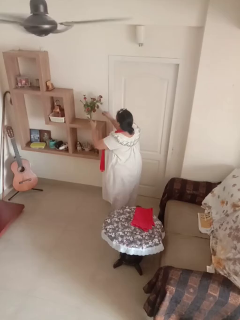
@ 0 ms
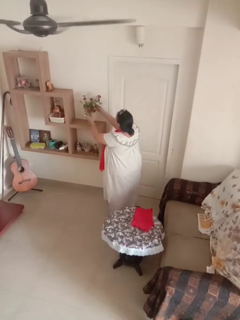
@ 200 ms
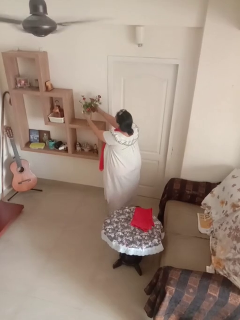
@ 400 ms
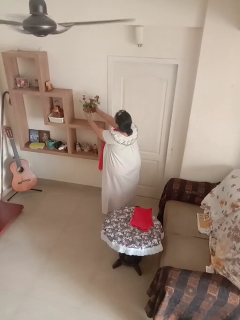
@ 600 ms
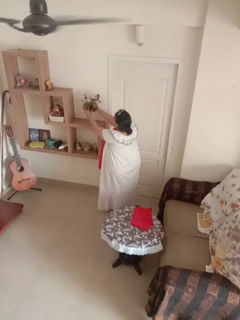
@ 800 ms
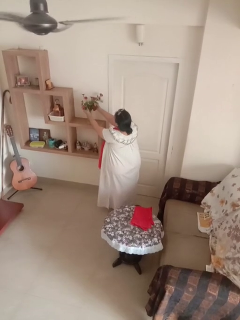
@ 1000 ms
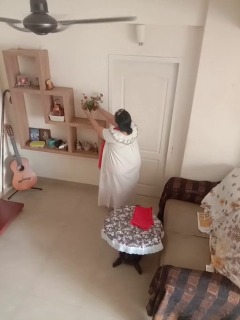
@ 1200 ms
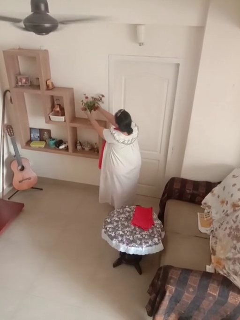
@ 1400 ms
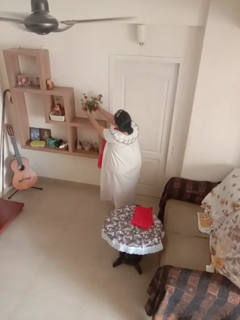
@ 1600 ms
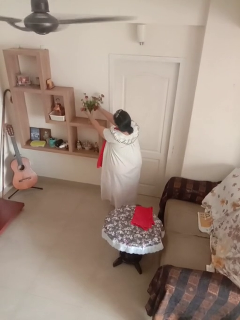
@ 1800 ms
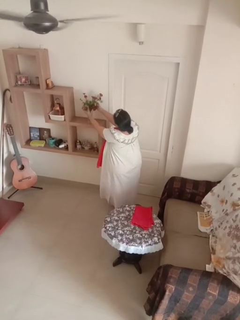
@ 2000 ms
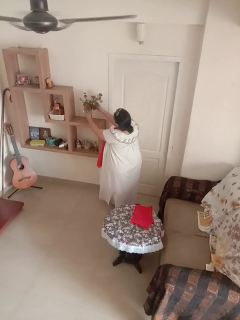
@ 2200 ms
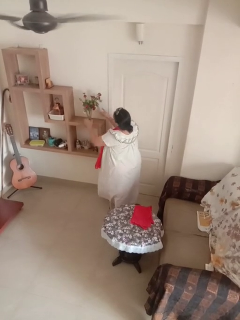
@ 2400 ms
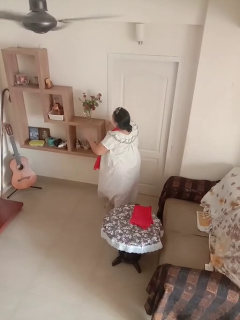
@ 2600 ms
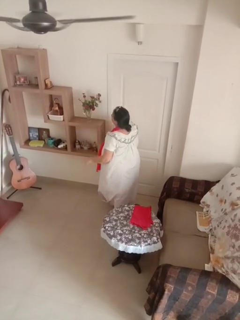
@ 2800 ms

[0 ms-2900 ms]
person arranges flowers in vase

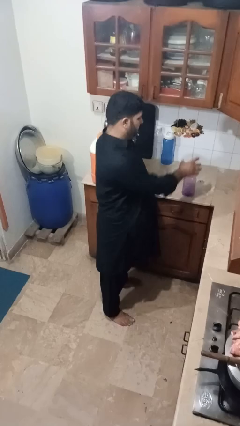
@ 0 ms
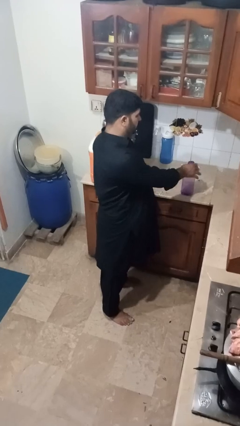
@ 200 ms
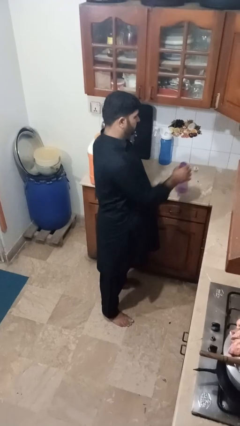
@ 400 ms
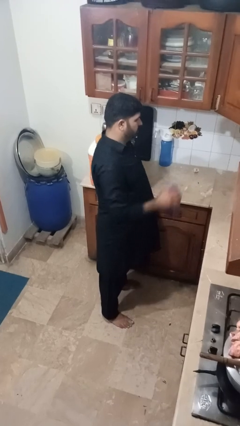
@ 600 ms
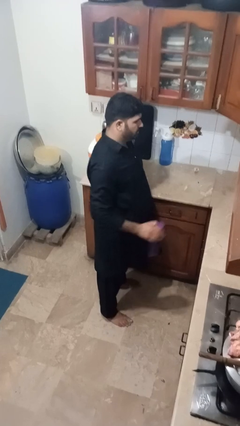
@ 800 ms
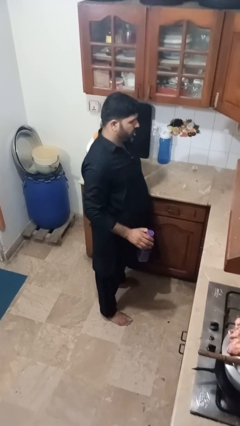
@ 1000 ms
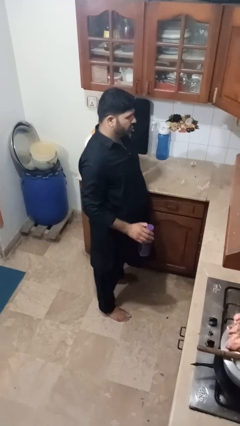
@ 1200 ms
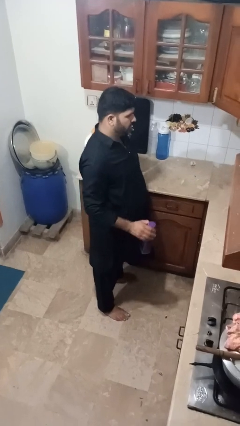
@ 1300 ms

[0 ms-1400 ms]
person picks up object from countertop

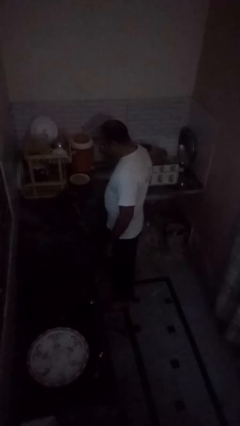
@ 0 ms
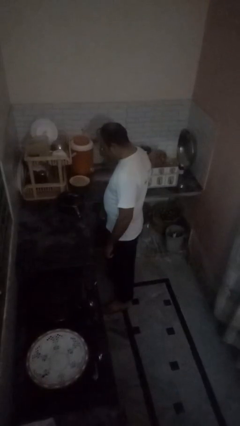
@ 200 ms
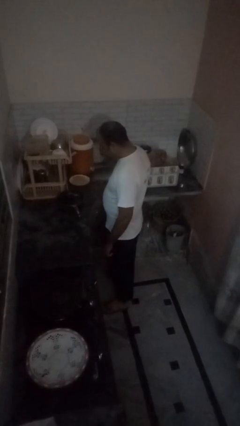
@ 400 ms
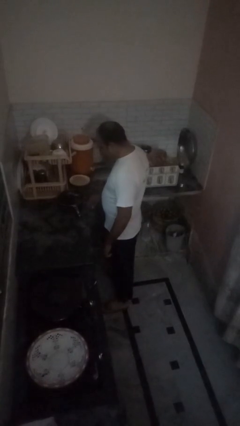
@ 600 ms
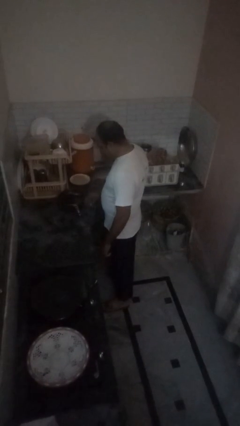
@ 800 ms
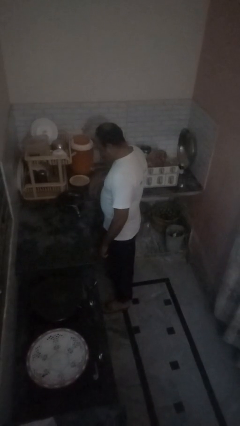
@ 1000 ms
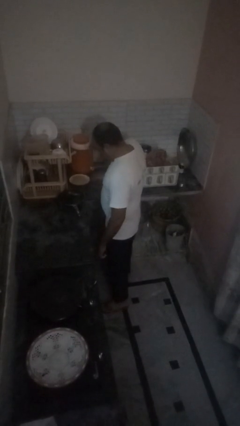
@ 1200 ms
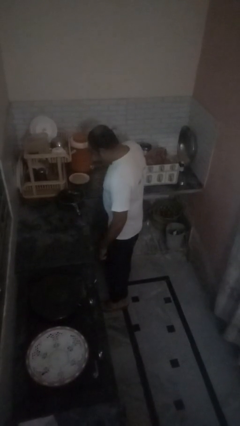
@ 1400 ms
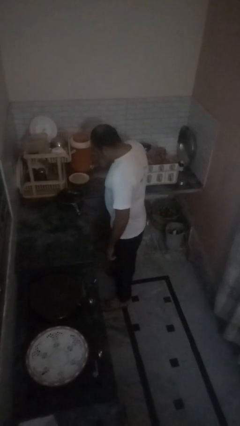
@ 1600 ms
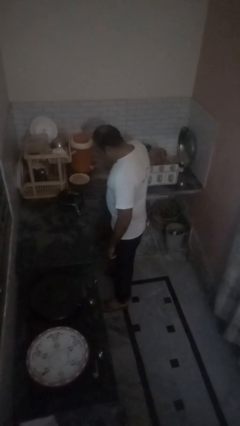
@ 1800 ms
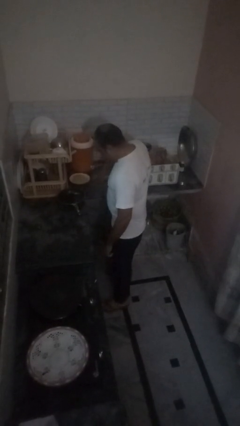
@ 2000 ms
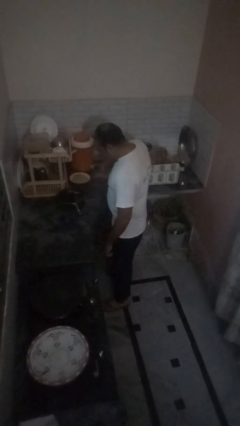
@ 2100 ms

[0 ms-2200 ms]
person burns hand

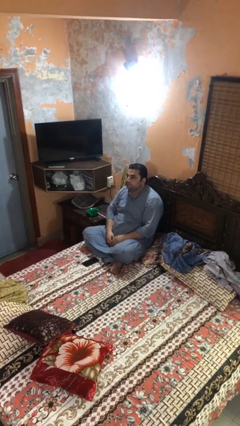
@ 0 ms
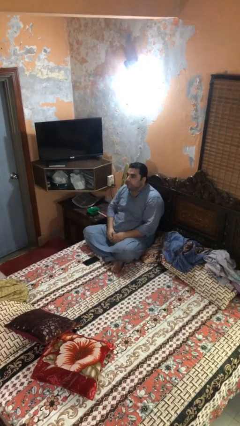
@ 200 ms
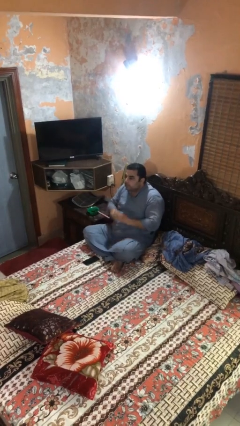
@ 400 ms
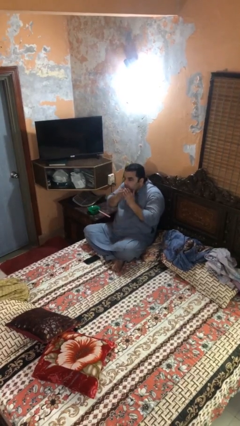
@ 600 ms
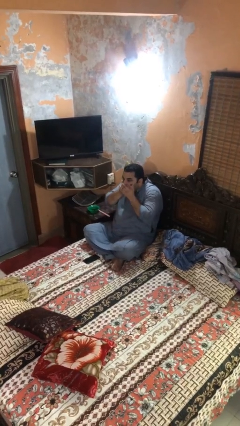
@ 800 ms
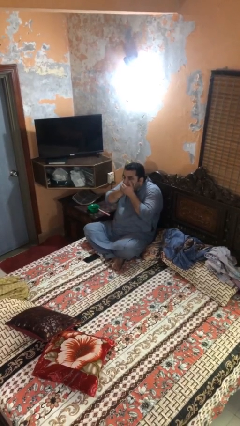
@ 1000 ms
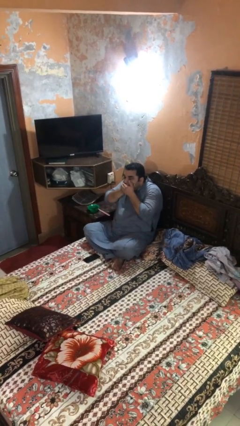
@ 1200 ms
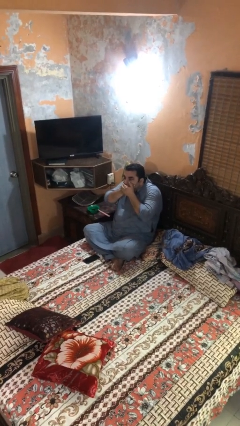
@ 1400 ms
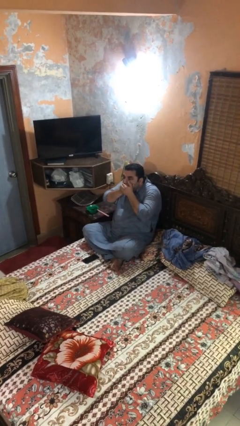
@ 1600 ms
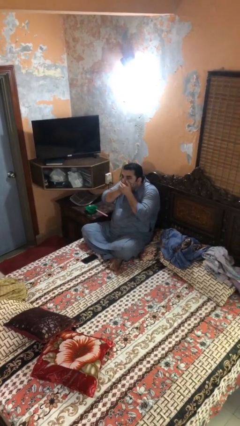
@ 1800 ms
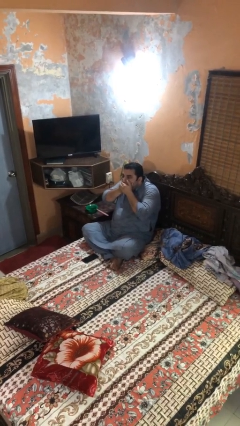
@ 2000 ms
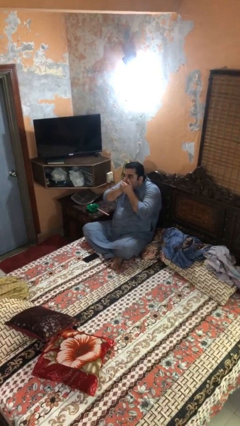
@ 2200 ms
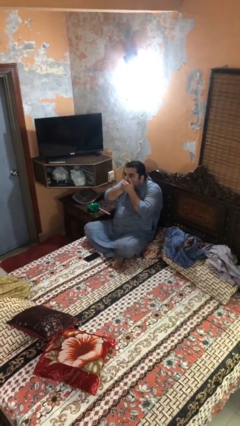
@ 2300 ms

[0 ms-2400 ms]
person covers face with hands

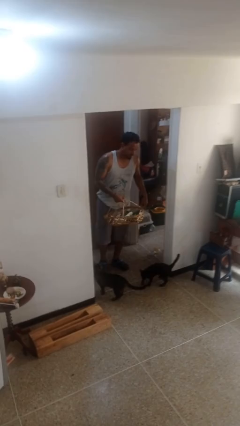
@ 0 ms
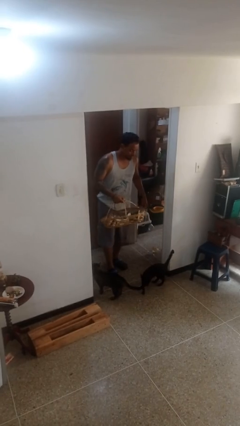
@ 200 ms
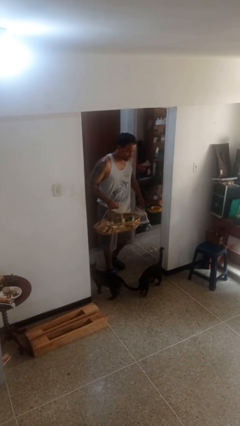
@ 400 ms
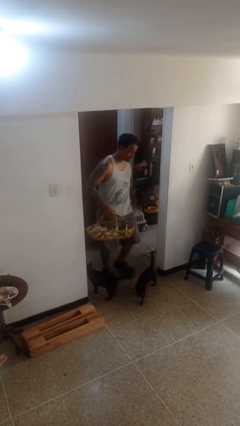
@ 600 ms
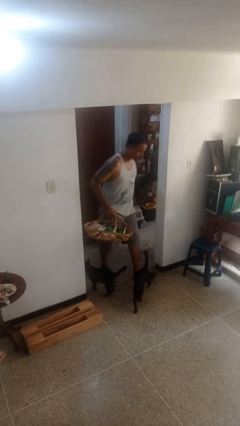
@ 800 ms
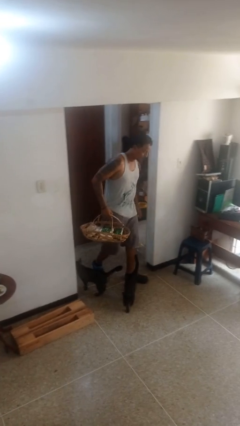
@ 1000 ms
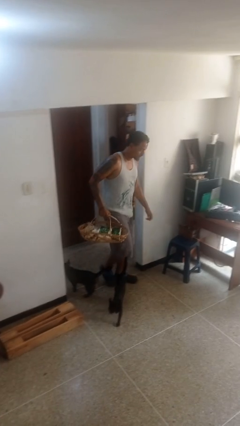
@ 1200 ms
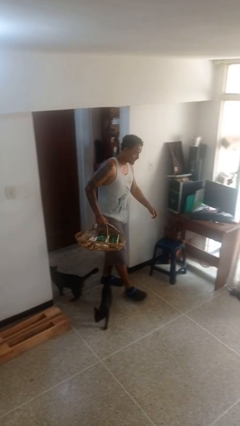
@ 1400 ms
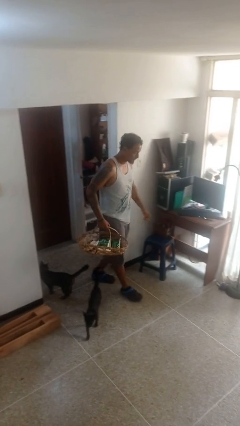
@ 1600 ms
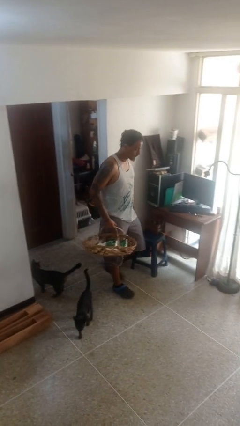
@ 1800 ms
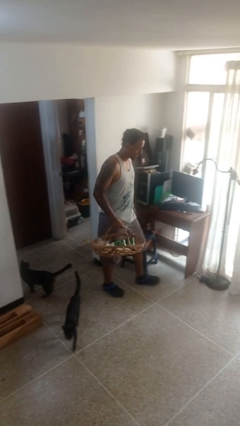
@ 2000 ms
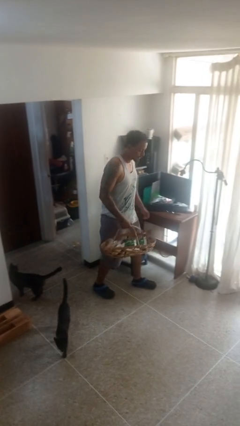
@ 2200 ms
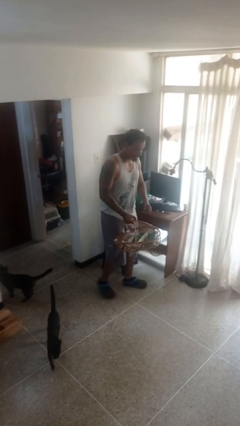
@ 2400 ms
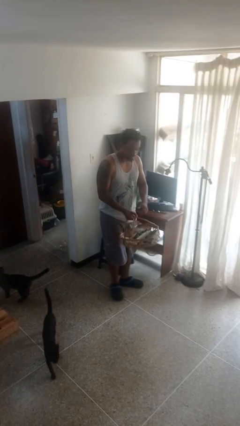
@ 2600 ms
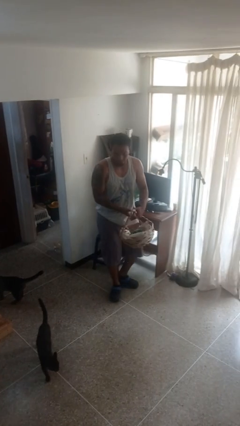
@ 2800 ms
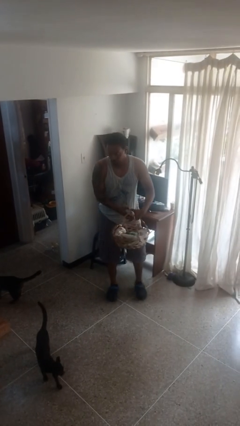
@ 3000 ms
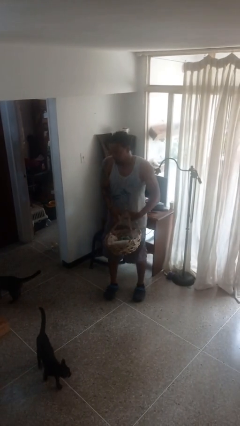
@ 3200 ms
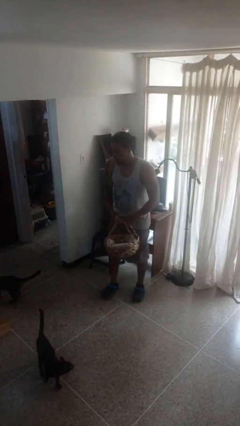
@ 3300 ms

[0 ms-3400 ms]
person carries groceries

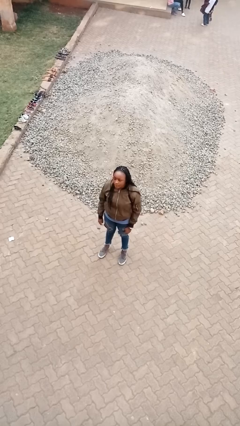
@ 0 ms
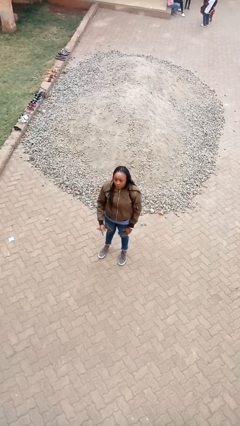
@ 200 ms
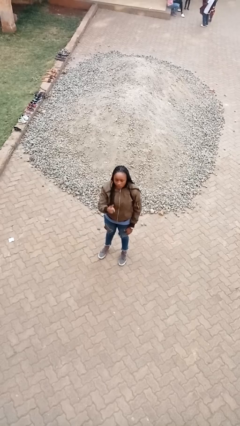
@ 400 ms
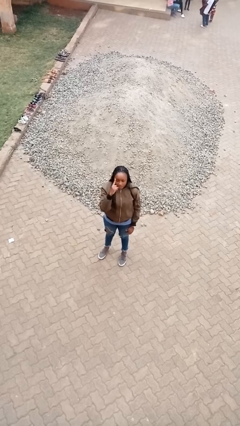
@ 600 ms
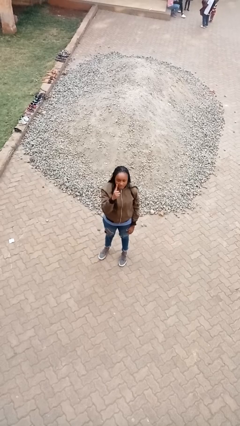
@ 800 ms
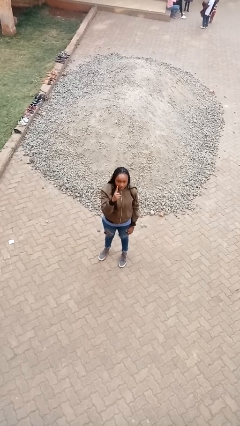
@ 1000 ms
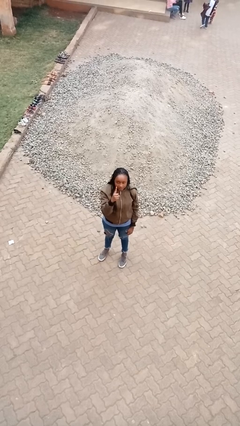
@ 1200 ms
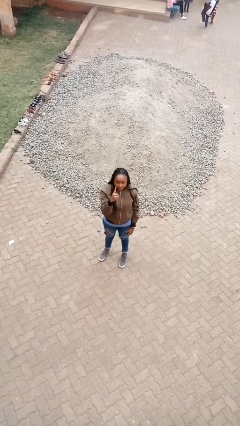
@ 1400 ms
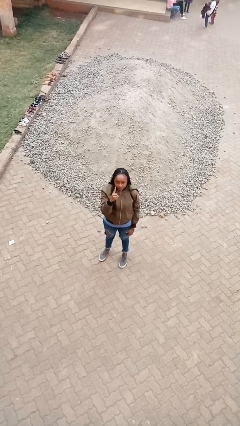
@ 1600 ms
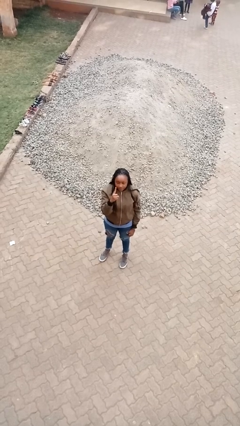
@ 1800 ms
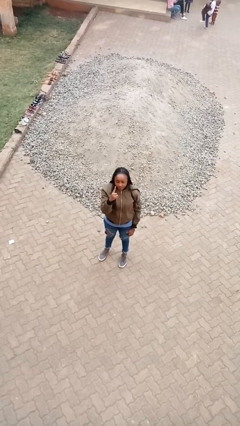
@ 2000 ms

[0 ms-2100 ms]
person gestures number one

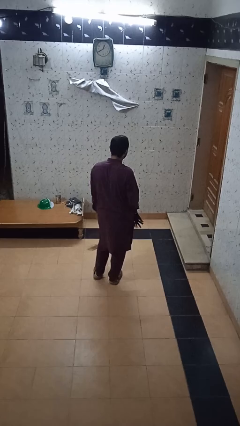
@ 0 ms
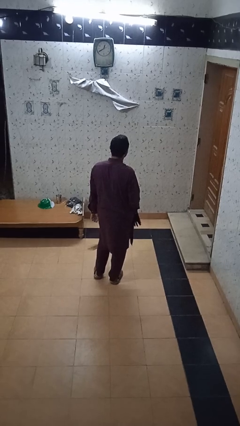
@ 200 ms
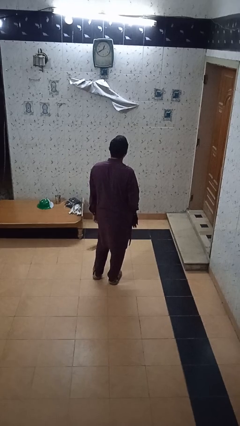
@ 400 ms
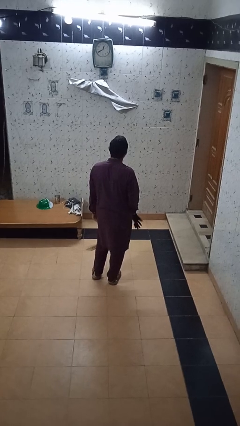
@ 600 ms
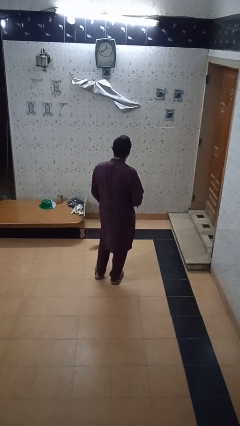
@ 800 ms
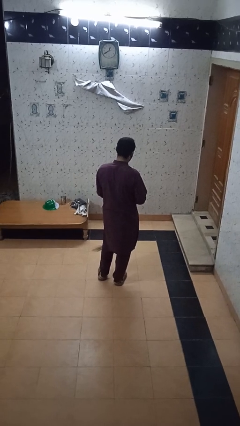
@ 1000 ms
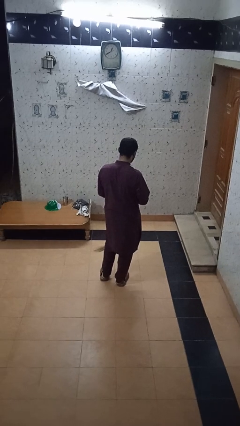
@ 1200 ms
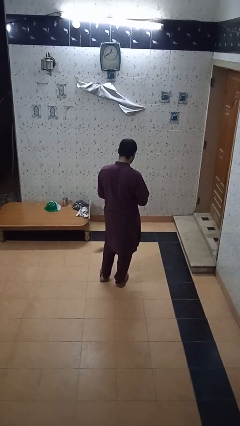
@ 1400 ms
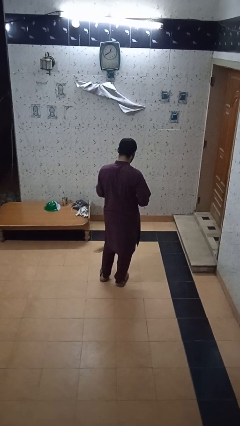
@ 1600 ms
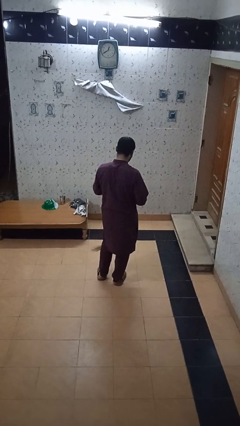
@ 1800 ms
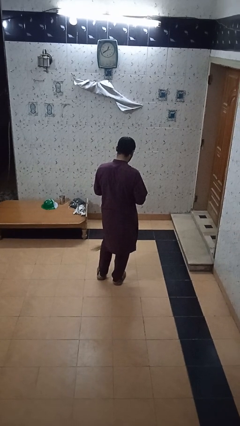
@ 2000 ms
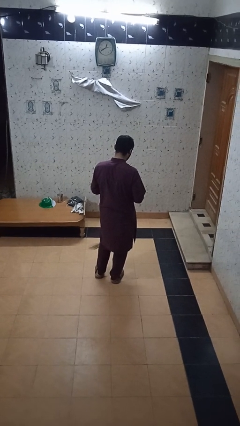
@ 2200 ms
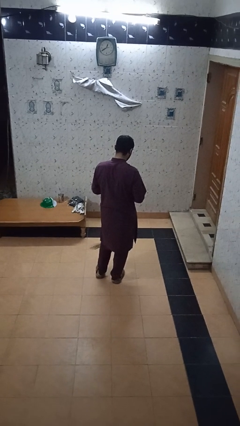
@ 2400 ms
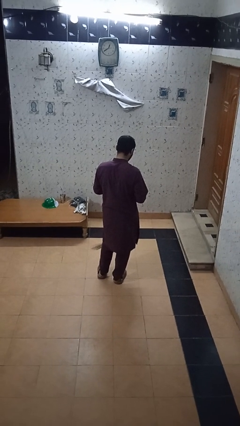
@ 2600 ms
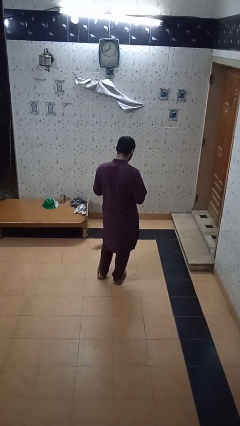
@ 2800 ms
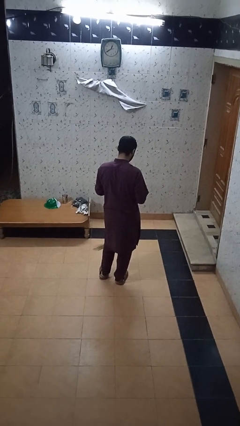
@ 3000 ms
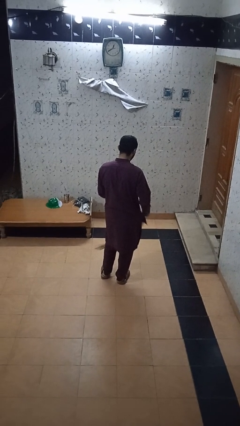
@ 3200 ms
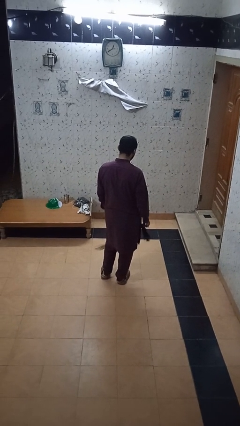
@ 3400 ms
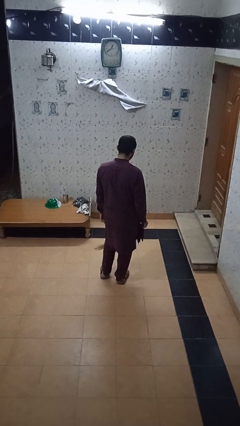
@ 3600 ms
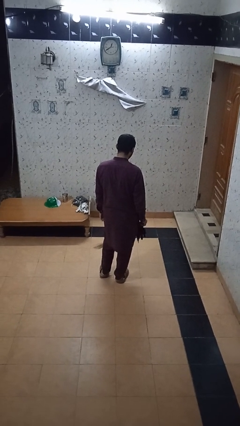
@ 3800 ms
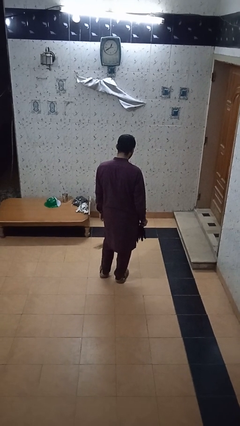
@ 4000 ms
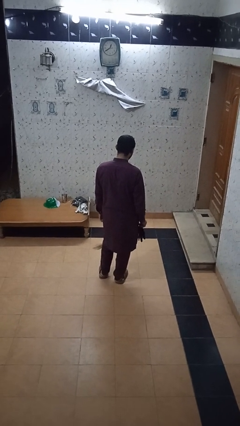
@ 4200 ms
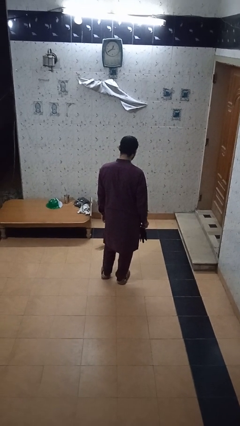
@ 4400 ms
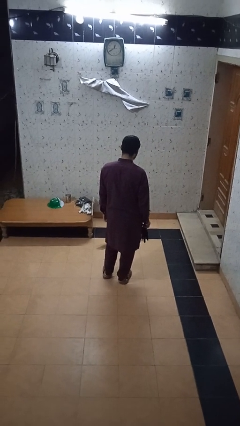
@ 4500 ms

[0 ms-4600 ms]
person takes off gloves
